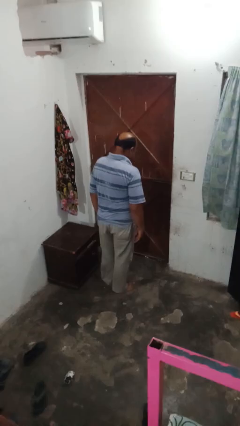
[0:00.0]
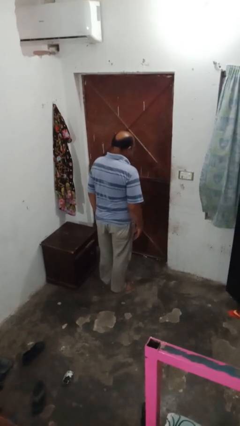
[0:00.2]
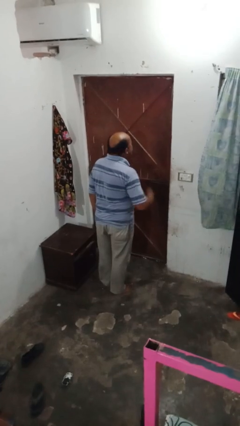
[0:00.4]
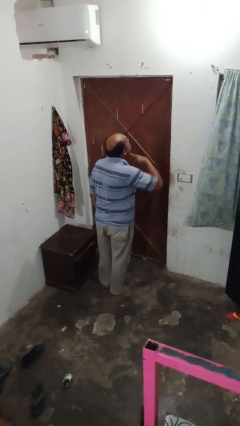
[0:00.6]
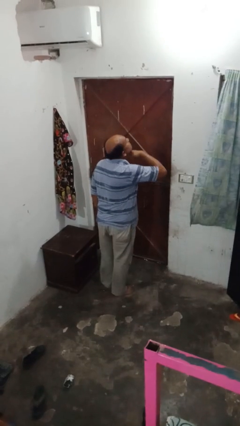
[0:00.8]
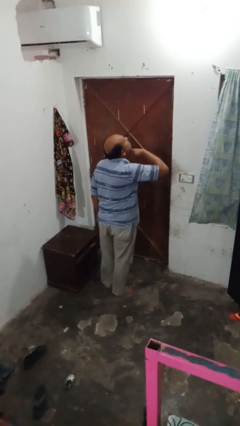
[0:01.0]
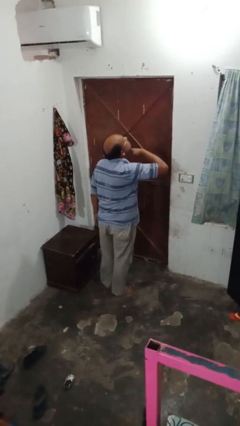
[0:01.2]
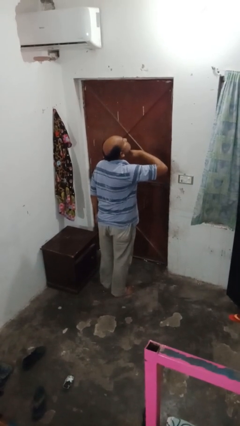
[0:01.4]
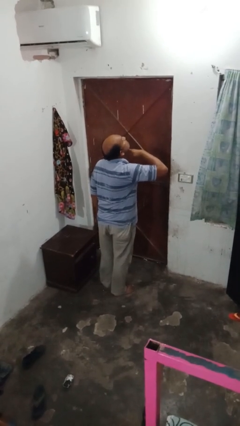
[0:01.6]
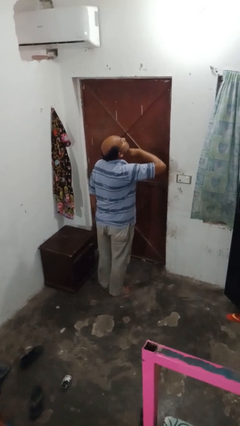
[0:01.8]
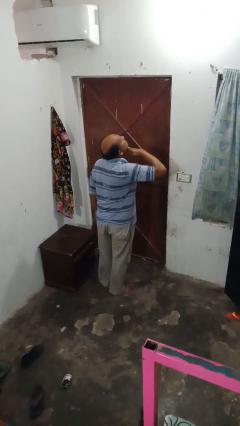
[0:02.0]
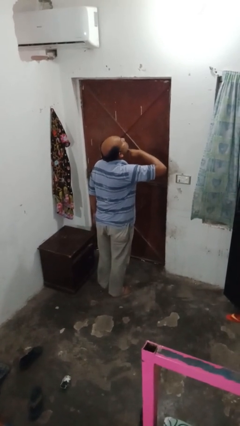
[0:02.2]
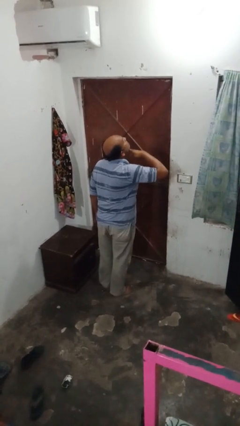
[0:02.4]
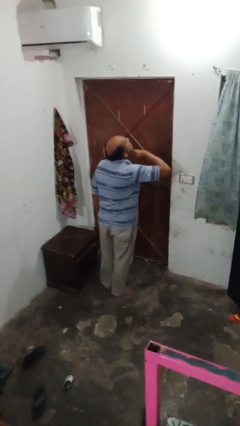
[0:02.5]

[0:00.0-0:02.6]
person gestures cut

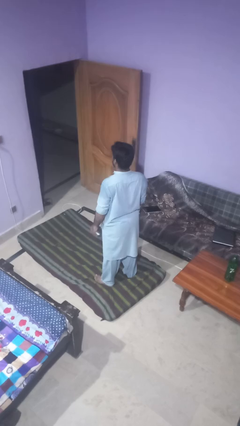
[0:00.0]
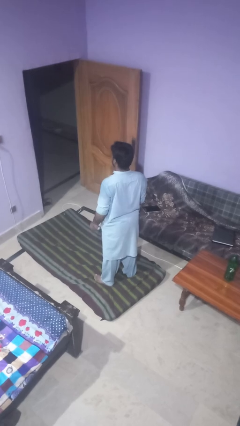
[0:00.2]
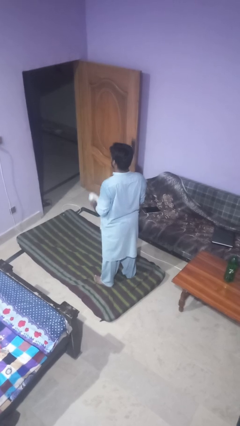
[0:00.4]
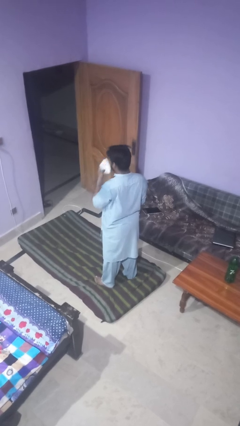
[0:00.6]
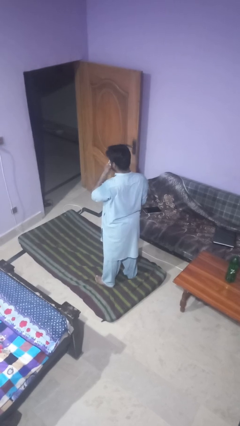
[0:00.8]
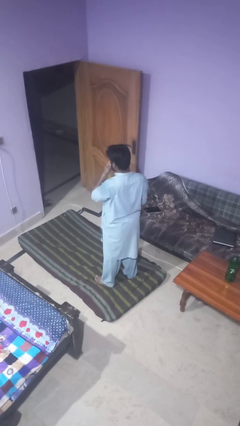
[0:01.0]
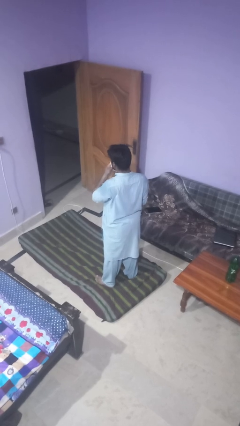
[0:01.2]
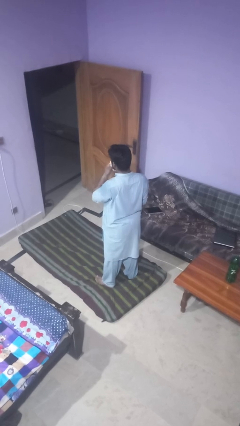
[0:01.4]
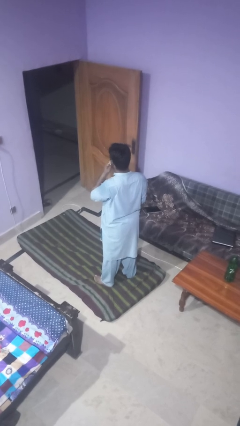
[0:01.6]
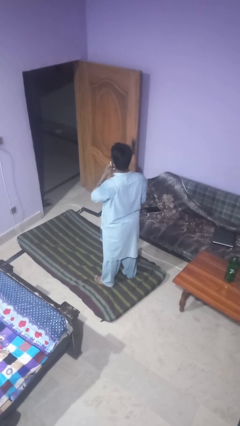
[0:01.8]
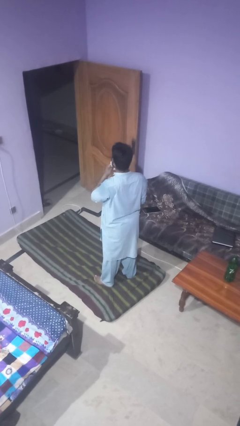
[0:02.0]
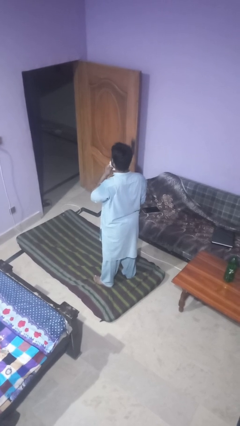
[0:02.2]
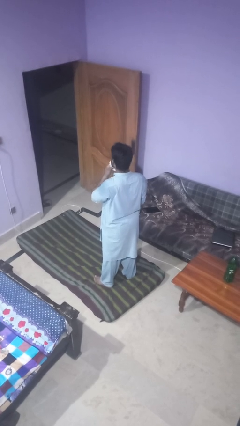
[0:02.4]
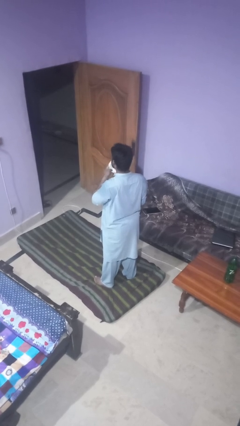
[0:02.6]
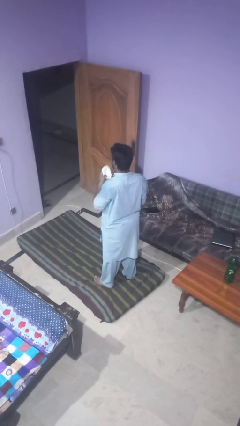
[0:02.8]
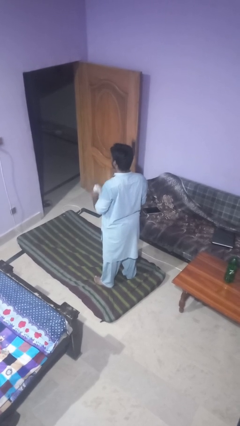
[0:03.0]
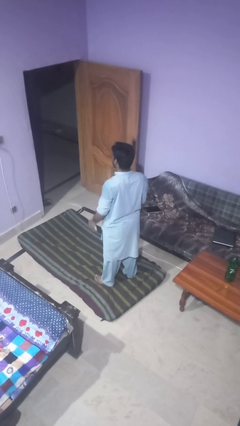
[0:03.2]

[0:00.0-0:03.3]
person wipes mouth with napkin

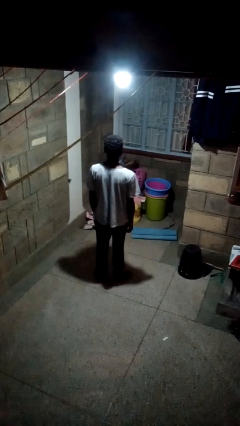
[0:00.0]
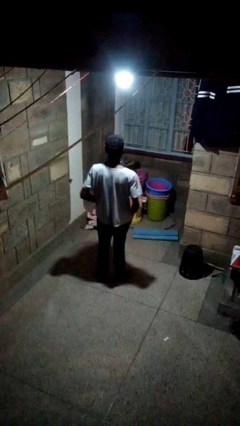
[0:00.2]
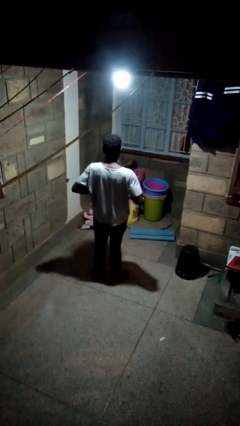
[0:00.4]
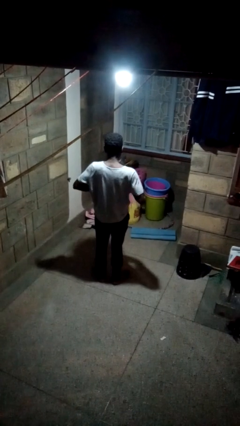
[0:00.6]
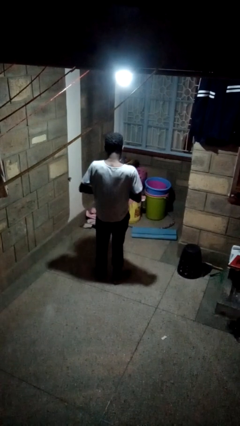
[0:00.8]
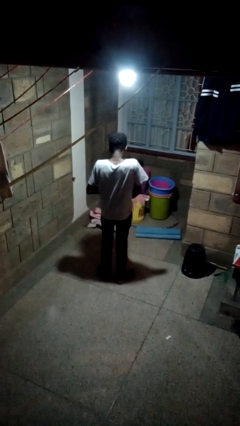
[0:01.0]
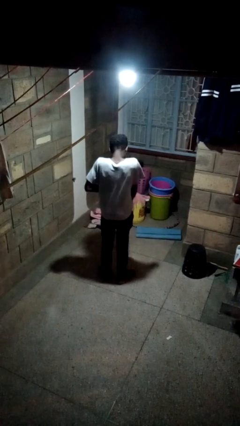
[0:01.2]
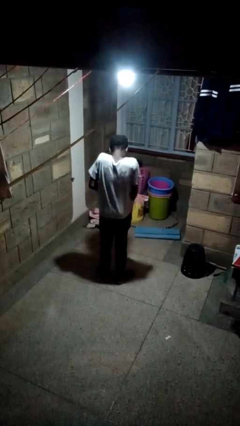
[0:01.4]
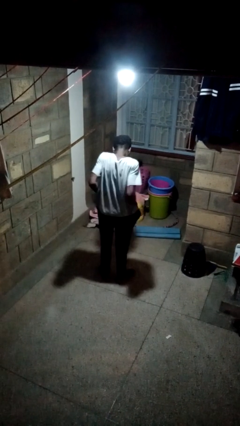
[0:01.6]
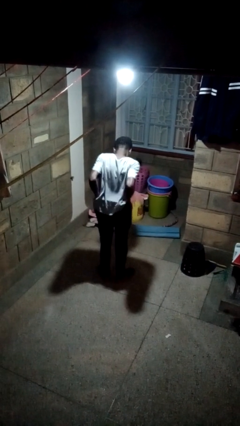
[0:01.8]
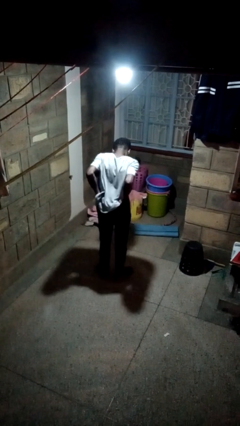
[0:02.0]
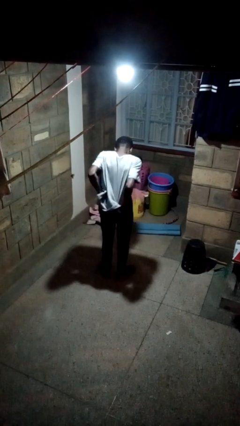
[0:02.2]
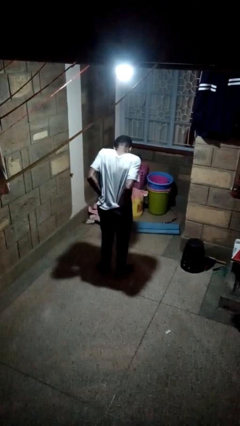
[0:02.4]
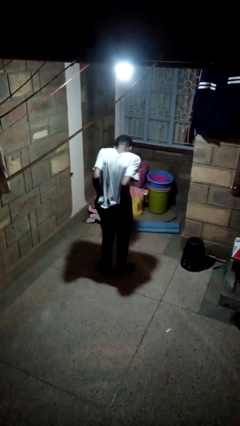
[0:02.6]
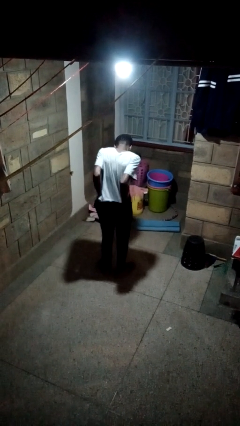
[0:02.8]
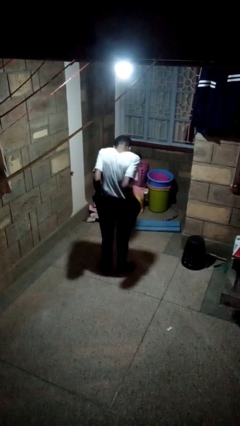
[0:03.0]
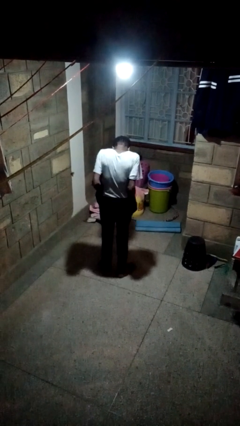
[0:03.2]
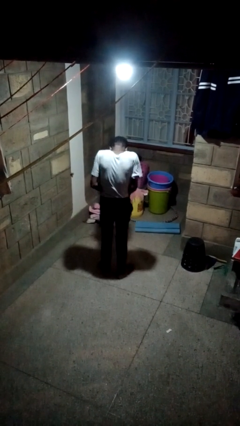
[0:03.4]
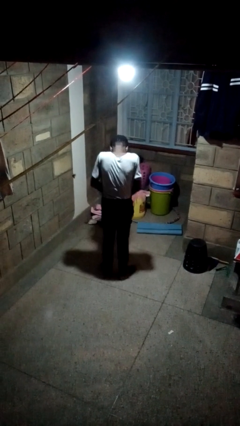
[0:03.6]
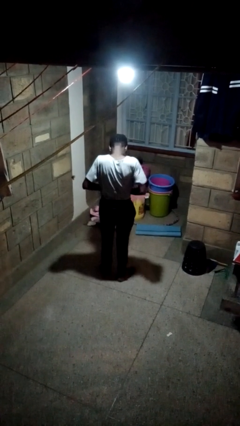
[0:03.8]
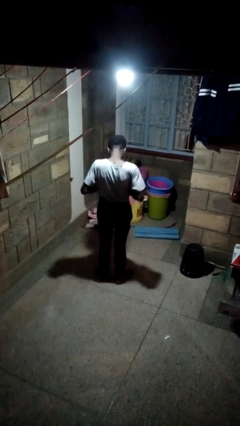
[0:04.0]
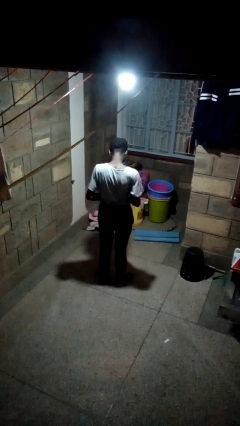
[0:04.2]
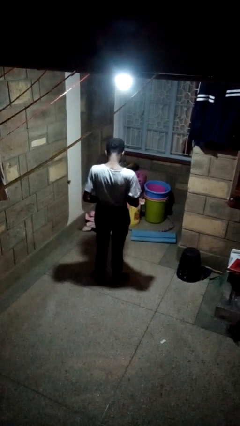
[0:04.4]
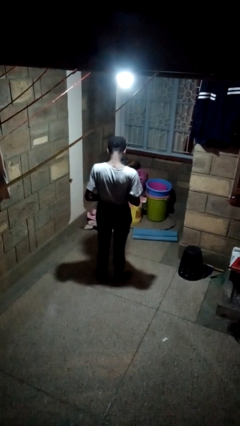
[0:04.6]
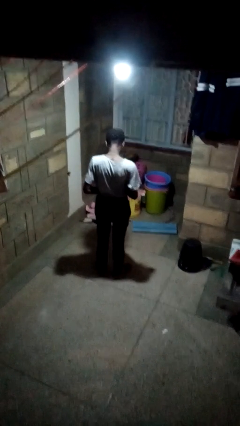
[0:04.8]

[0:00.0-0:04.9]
person tucks in shirt

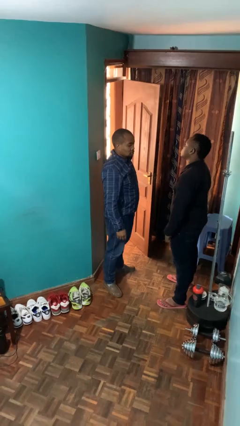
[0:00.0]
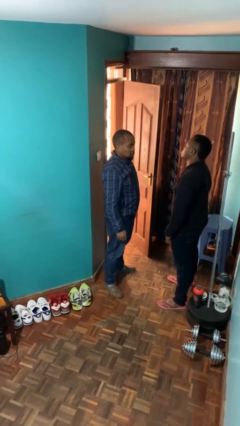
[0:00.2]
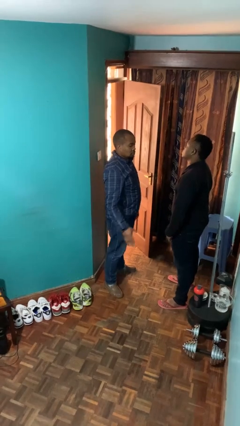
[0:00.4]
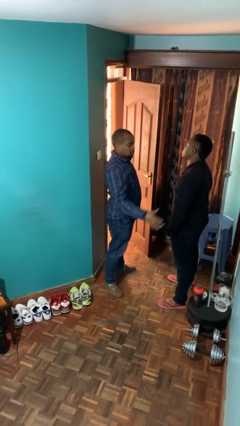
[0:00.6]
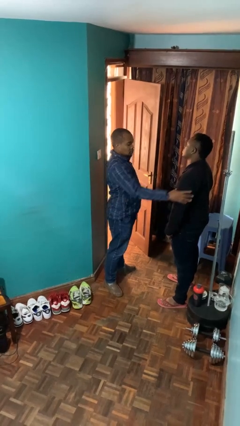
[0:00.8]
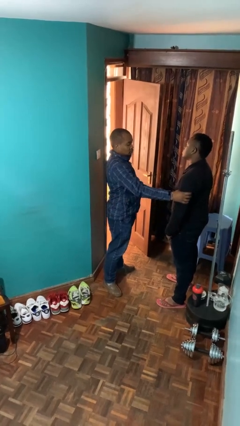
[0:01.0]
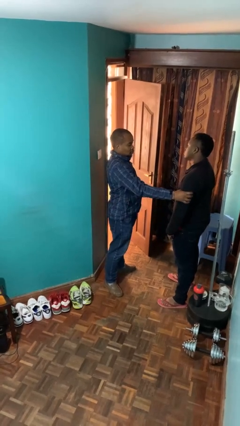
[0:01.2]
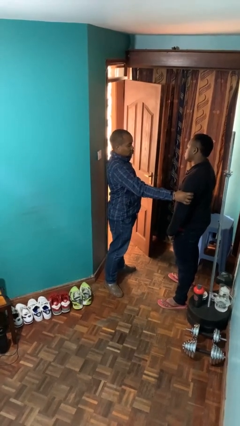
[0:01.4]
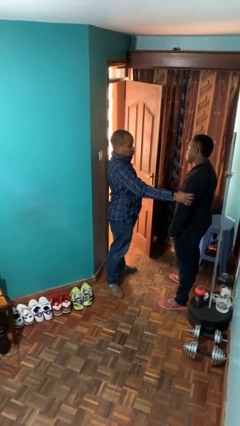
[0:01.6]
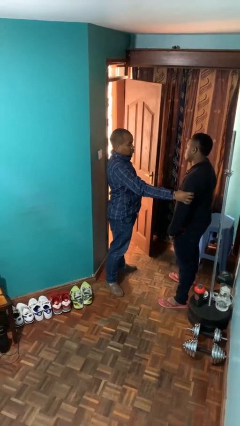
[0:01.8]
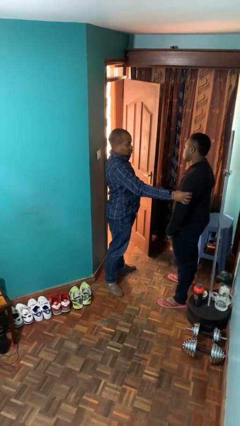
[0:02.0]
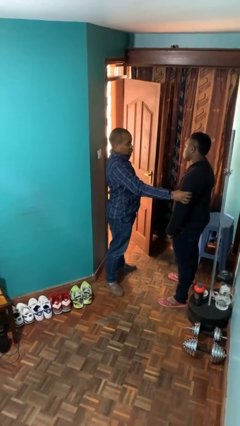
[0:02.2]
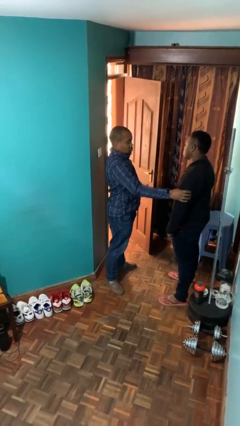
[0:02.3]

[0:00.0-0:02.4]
person grabs person by bicep

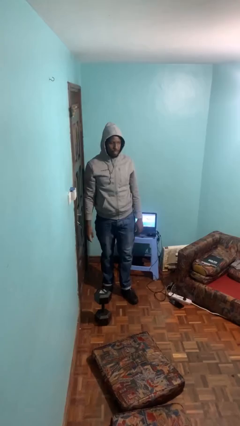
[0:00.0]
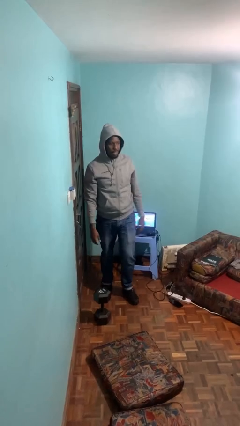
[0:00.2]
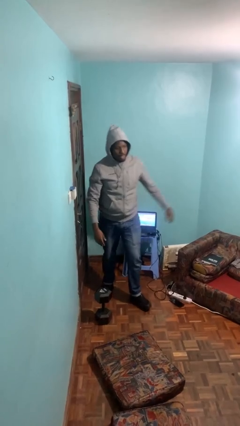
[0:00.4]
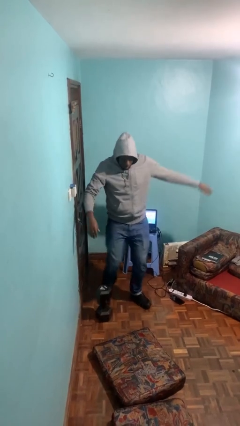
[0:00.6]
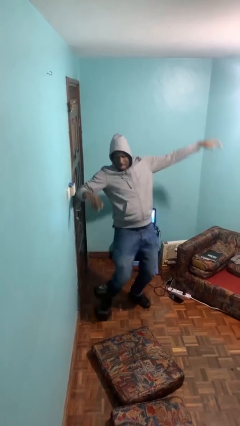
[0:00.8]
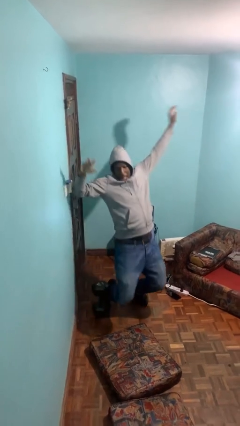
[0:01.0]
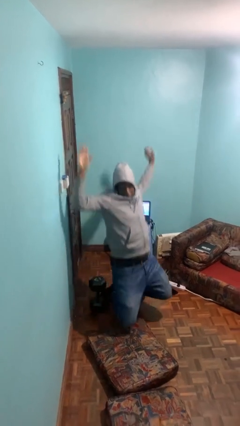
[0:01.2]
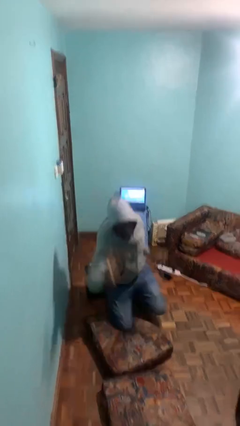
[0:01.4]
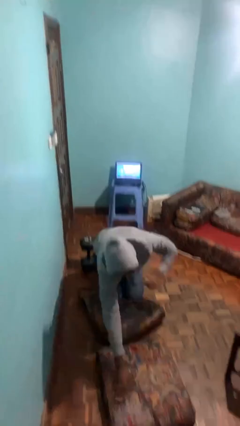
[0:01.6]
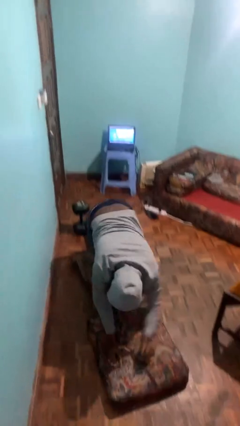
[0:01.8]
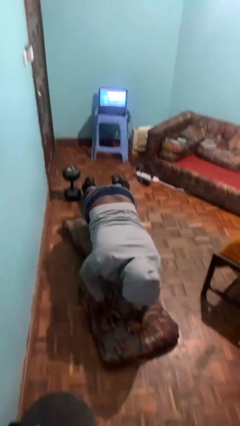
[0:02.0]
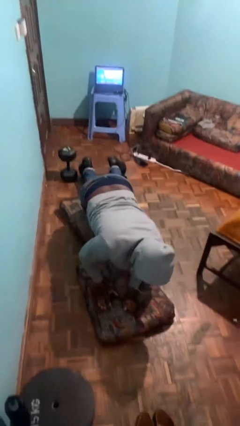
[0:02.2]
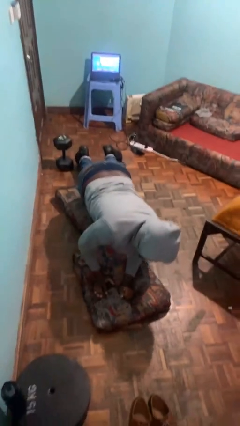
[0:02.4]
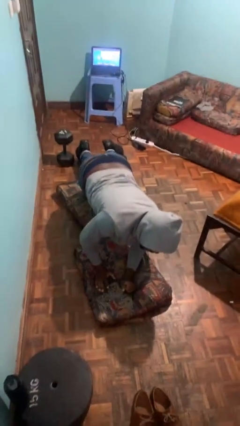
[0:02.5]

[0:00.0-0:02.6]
person trips on object on floor

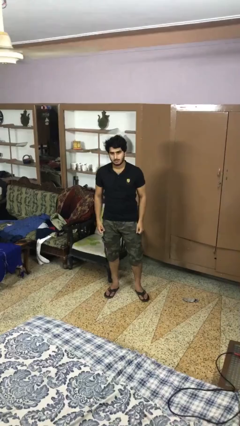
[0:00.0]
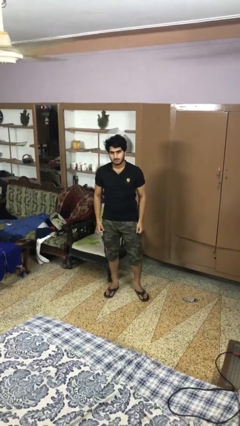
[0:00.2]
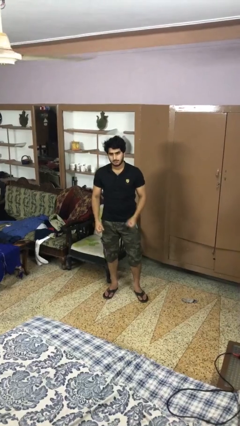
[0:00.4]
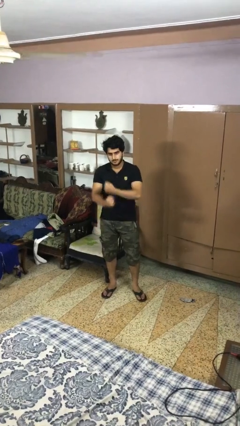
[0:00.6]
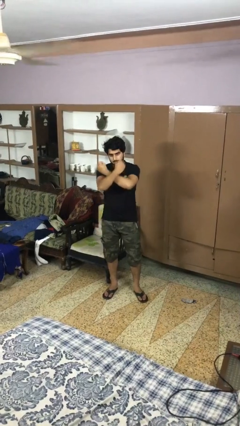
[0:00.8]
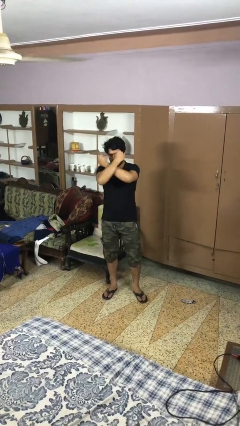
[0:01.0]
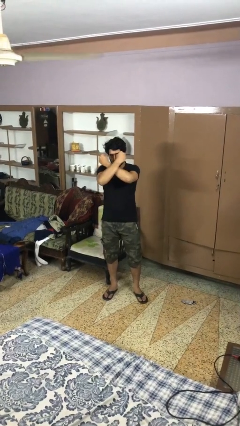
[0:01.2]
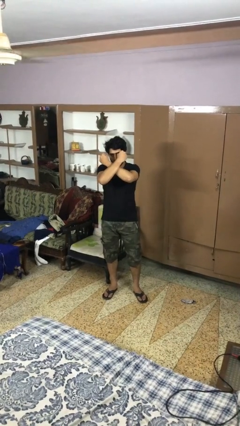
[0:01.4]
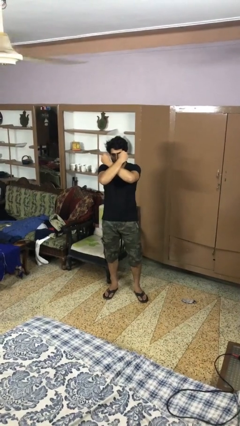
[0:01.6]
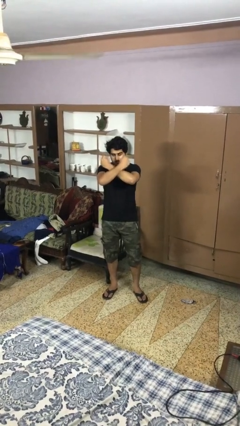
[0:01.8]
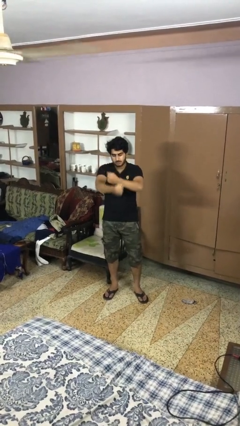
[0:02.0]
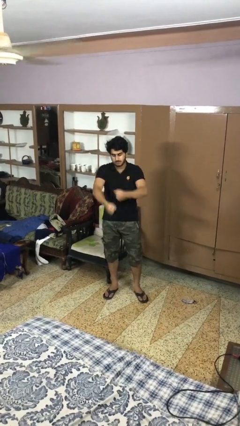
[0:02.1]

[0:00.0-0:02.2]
person gestures arms x
